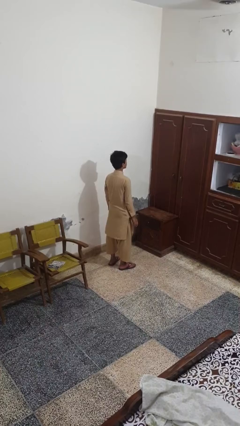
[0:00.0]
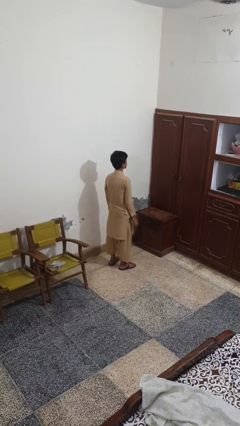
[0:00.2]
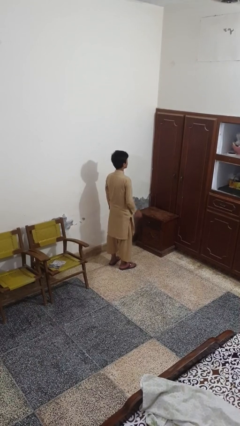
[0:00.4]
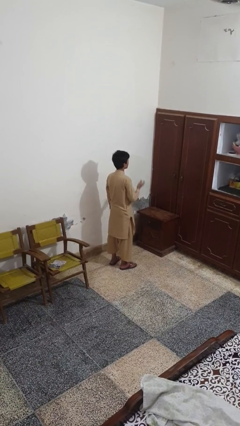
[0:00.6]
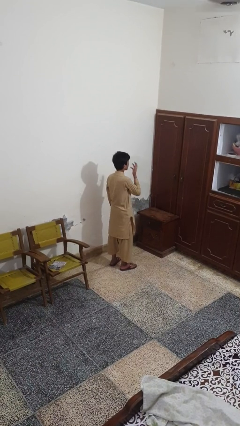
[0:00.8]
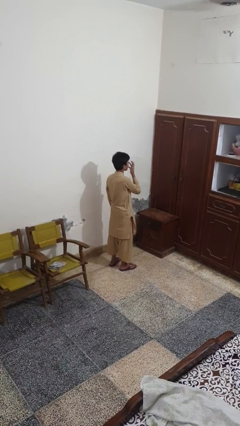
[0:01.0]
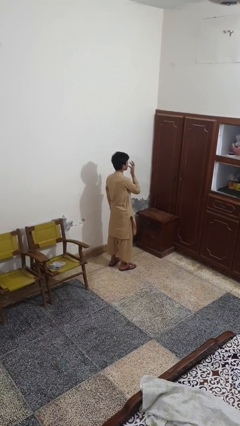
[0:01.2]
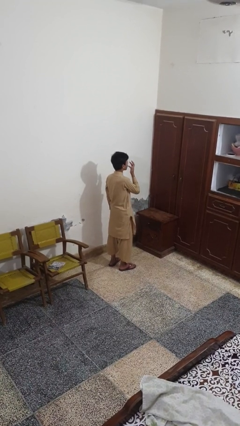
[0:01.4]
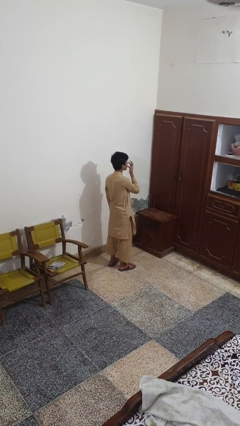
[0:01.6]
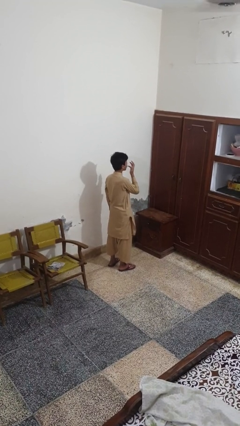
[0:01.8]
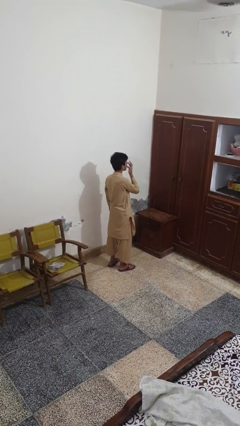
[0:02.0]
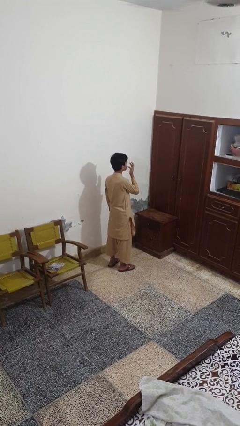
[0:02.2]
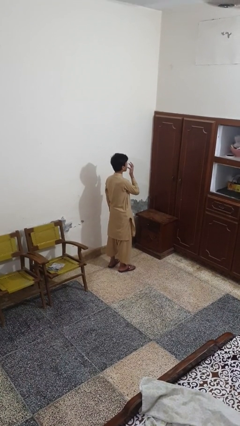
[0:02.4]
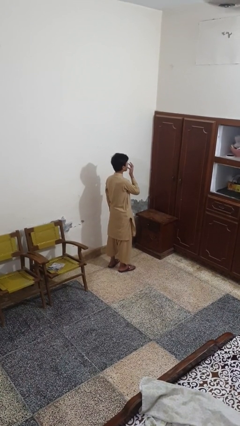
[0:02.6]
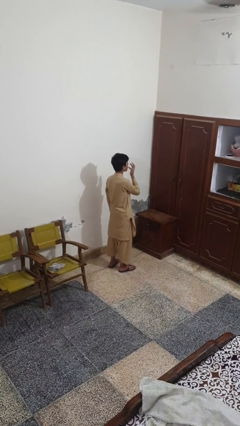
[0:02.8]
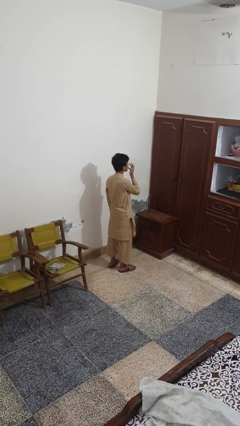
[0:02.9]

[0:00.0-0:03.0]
person licks fingers

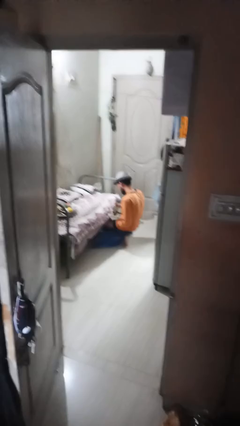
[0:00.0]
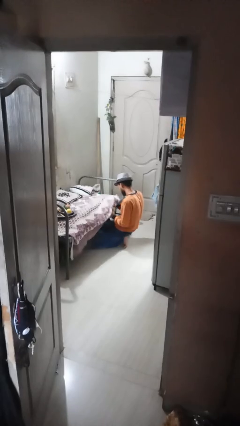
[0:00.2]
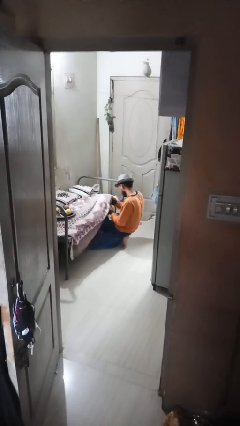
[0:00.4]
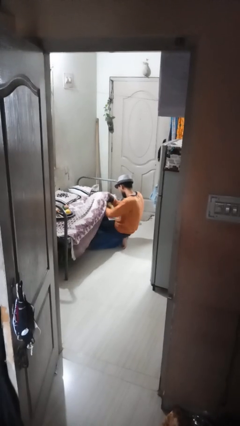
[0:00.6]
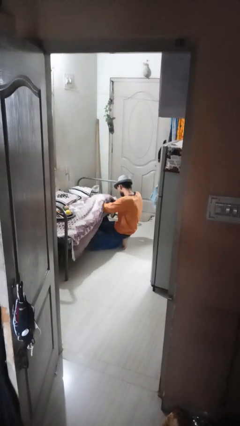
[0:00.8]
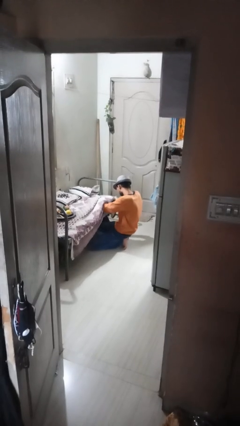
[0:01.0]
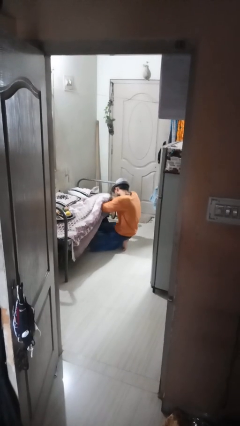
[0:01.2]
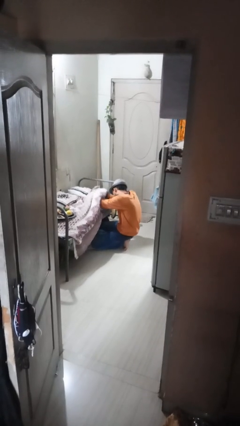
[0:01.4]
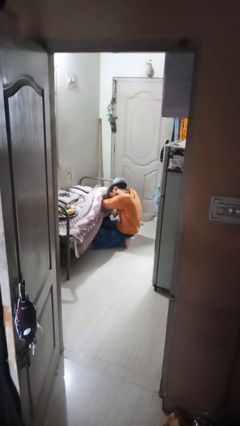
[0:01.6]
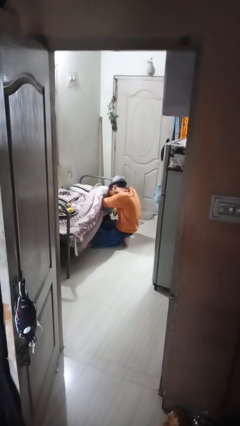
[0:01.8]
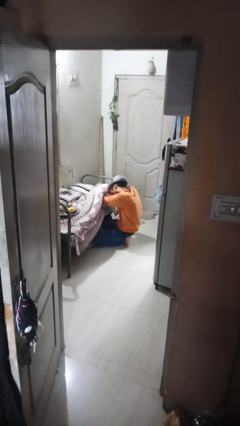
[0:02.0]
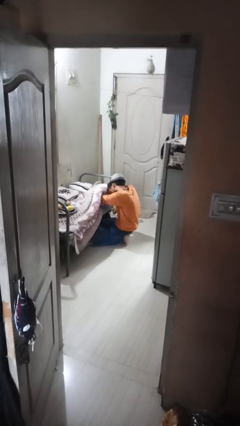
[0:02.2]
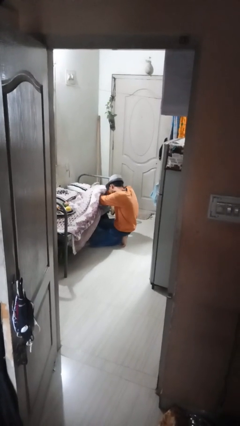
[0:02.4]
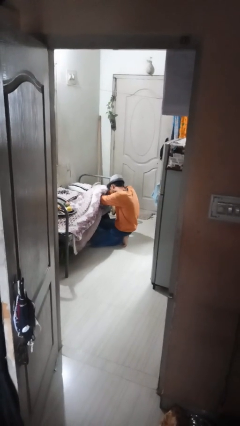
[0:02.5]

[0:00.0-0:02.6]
person searches under couch

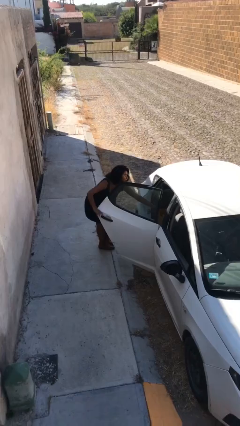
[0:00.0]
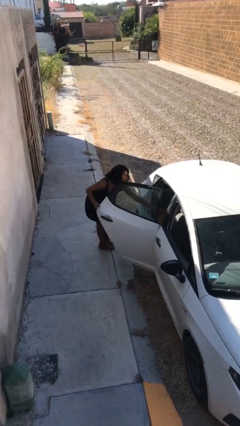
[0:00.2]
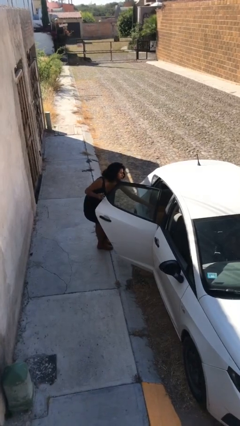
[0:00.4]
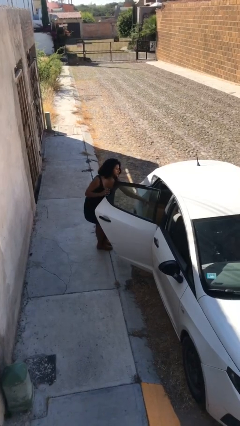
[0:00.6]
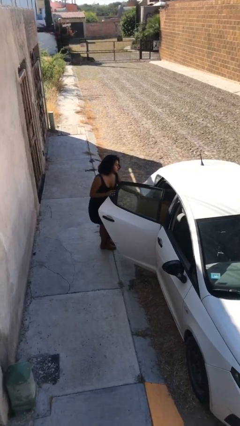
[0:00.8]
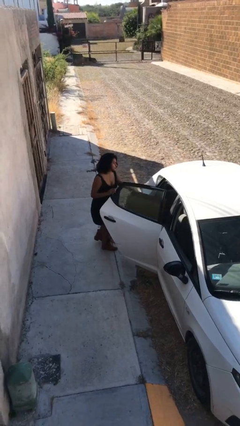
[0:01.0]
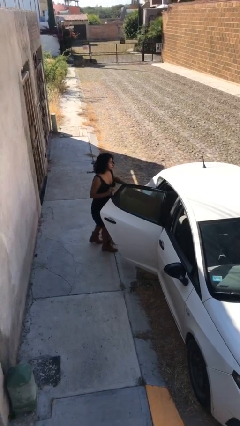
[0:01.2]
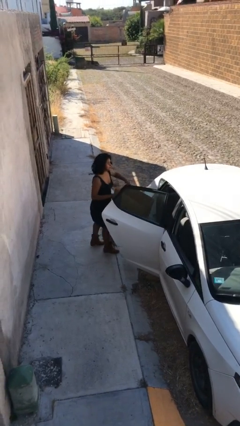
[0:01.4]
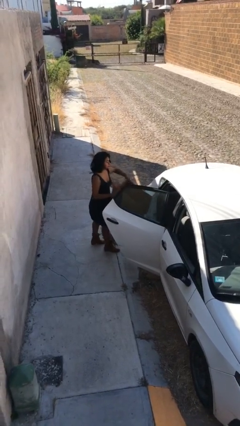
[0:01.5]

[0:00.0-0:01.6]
person unloads car

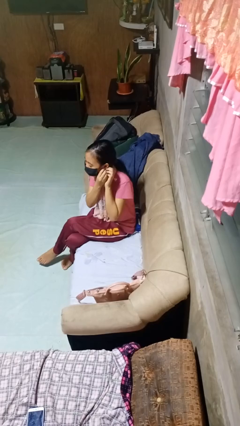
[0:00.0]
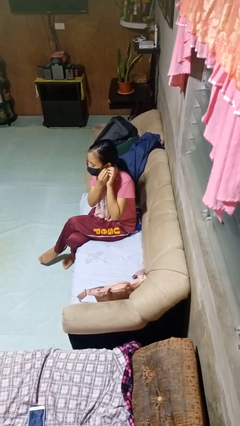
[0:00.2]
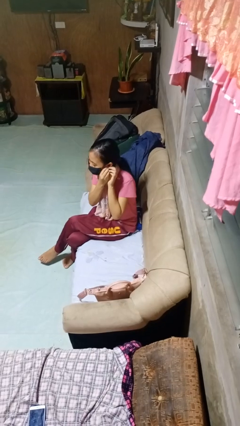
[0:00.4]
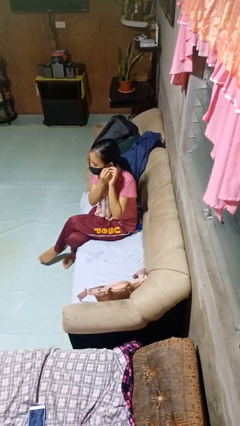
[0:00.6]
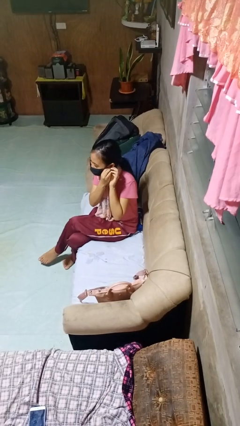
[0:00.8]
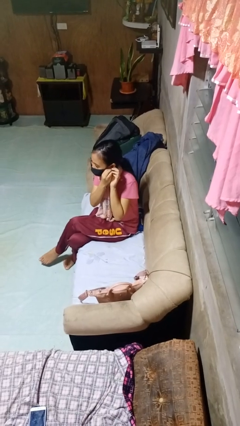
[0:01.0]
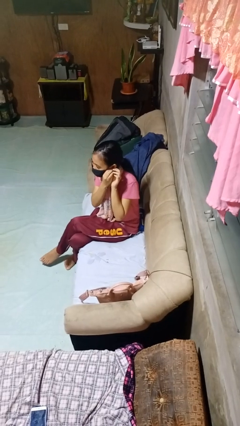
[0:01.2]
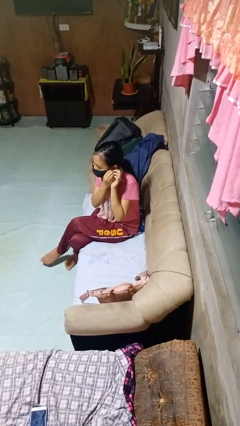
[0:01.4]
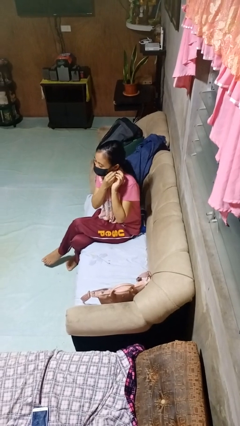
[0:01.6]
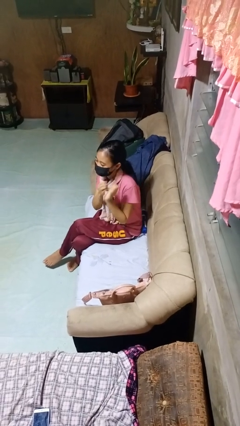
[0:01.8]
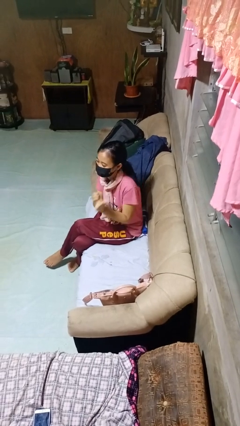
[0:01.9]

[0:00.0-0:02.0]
person puts on earrings

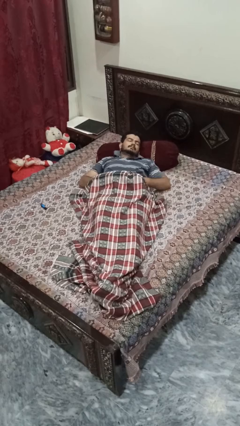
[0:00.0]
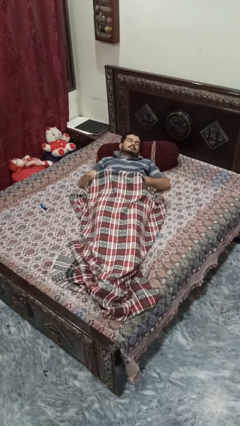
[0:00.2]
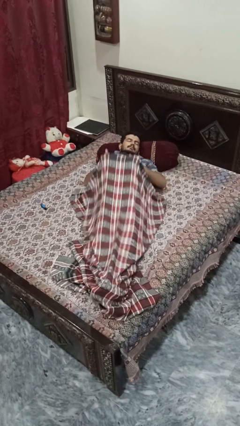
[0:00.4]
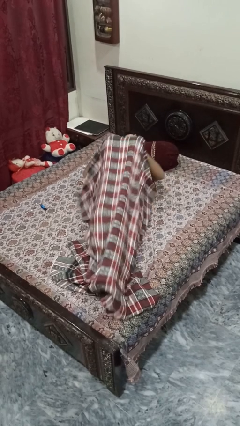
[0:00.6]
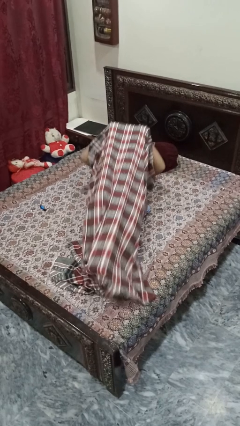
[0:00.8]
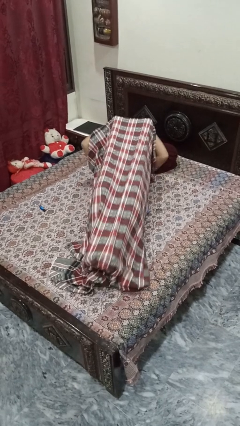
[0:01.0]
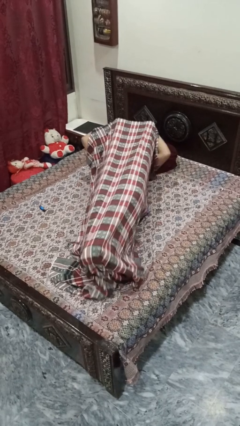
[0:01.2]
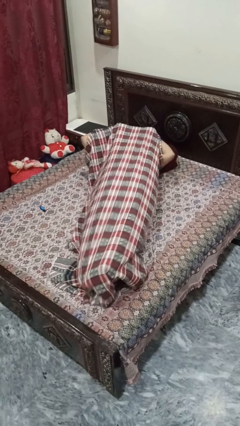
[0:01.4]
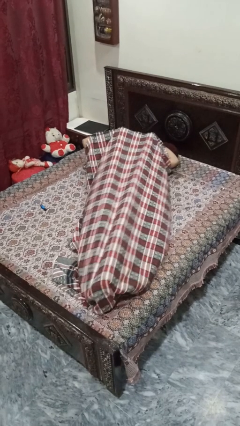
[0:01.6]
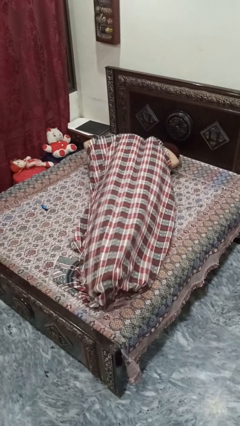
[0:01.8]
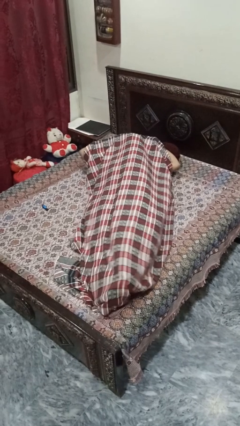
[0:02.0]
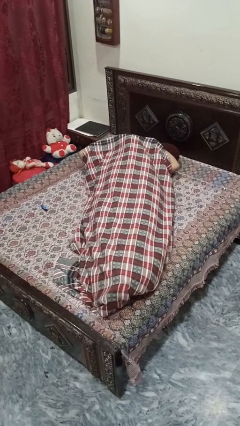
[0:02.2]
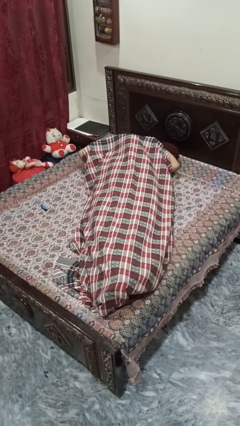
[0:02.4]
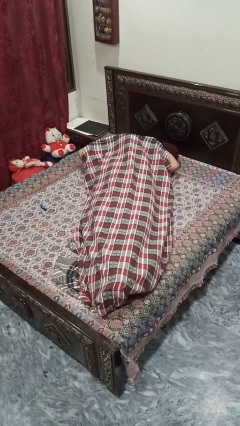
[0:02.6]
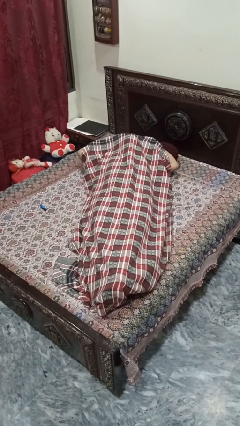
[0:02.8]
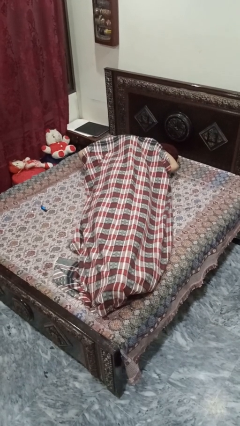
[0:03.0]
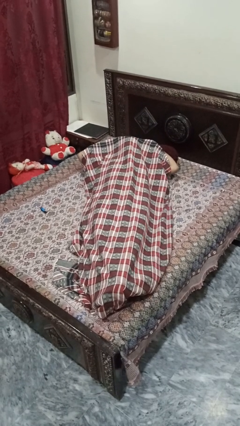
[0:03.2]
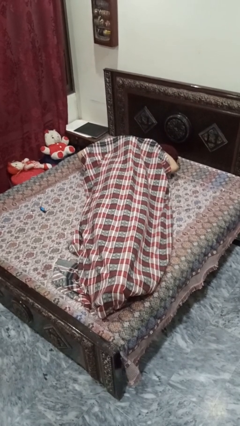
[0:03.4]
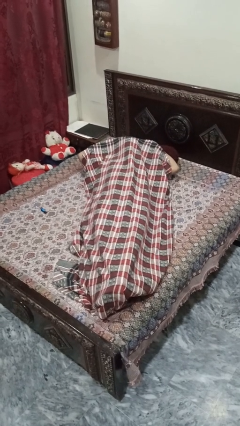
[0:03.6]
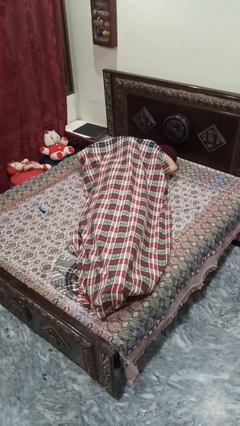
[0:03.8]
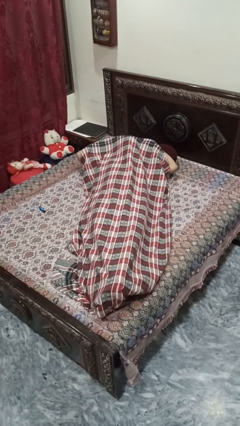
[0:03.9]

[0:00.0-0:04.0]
person covers with bedsheets

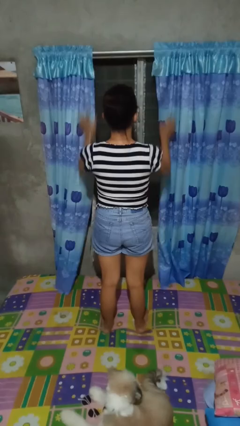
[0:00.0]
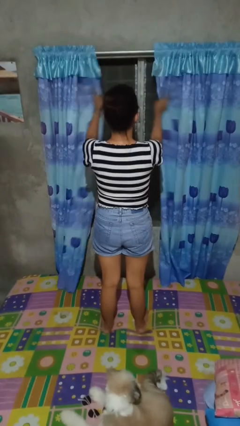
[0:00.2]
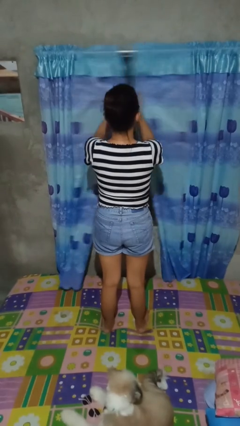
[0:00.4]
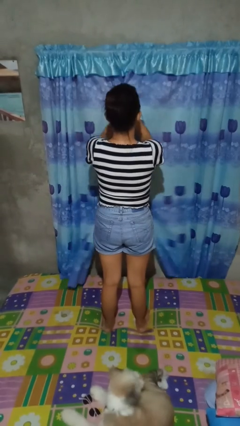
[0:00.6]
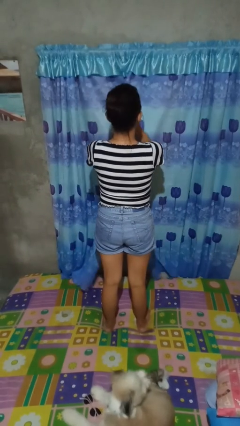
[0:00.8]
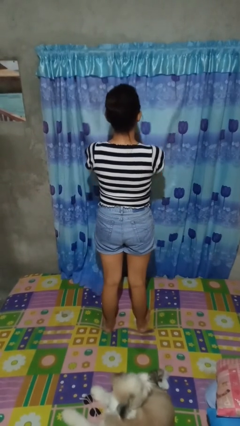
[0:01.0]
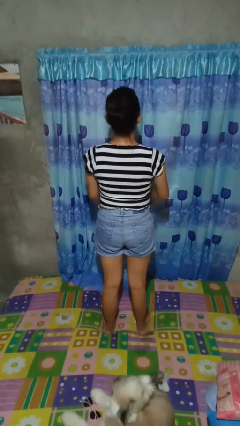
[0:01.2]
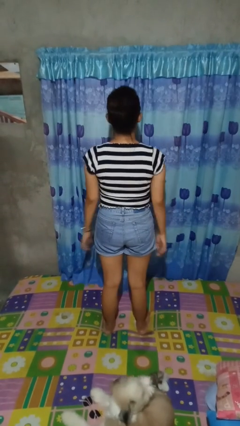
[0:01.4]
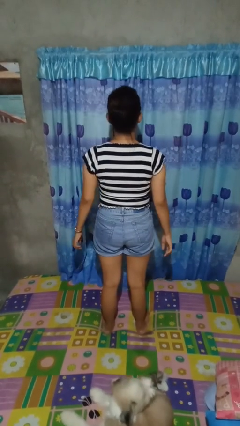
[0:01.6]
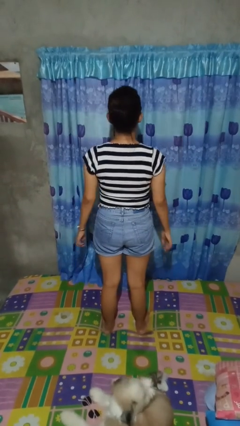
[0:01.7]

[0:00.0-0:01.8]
person closes curtains

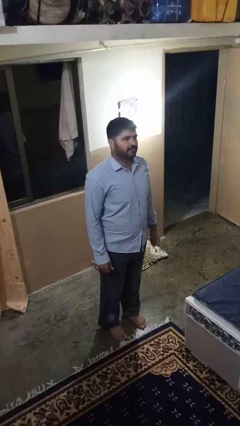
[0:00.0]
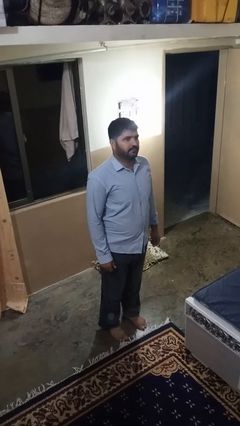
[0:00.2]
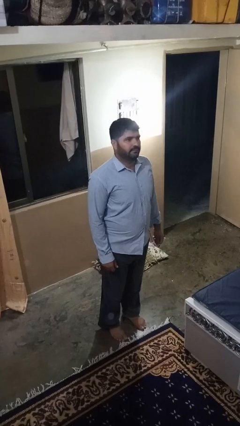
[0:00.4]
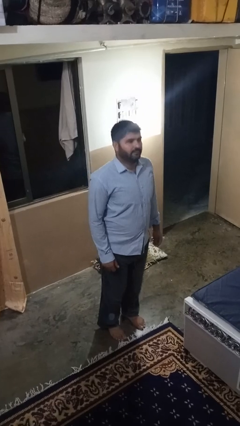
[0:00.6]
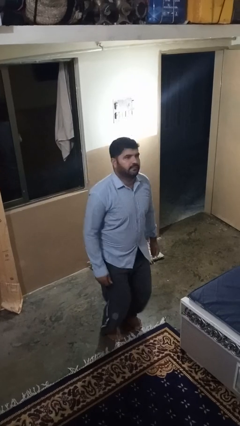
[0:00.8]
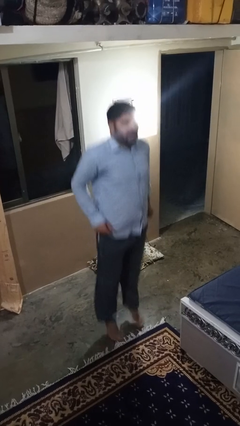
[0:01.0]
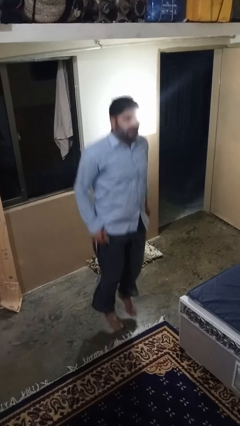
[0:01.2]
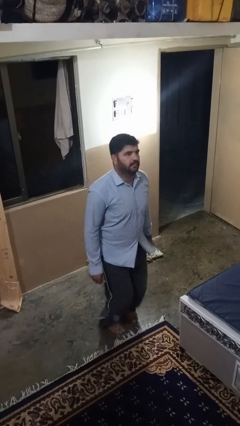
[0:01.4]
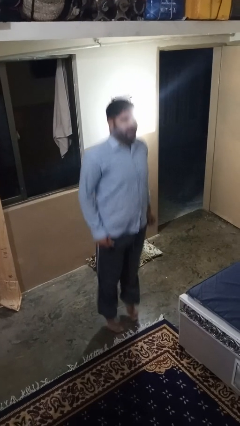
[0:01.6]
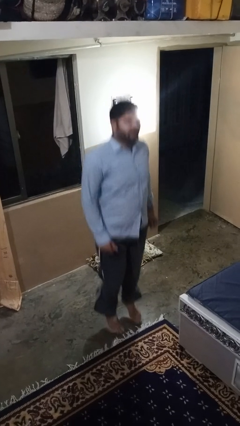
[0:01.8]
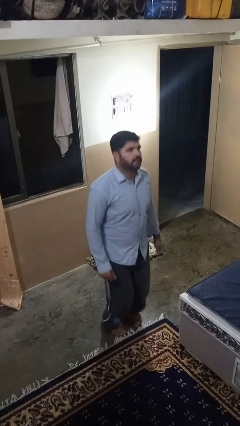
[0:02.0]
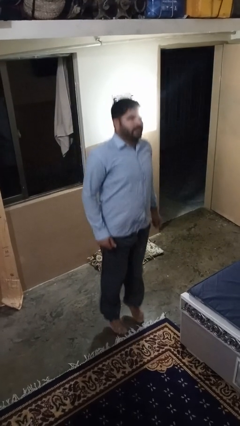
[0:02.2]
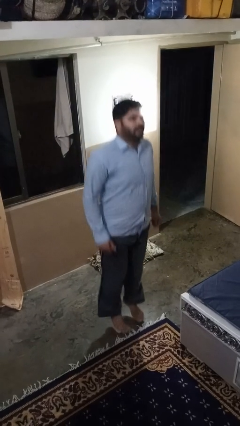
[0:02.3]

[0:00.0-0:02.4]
person jumps
